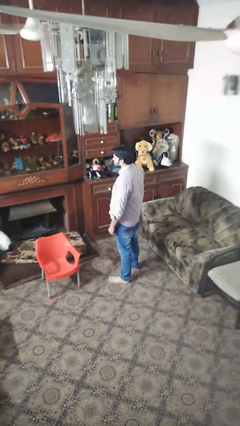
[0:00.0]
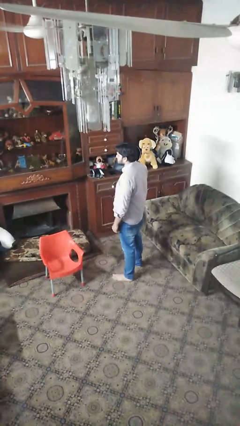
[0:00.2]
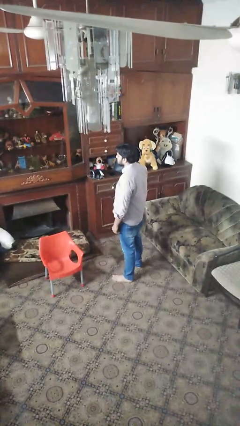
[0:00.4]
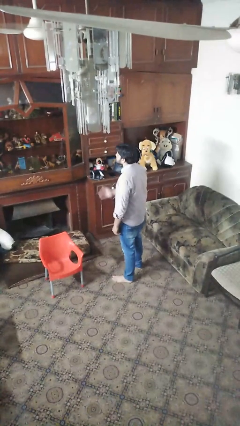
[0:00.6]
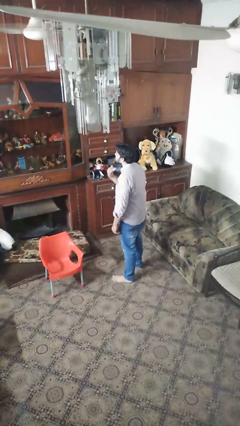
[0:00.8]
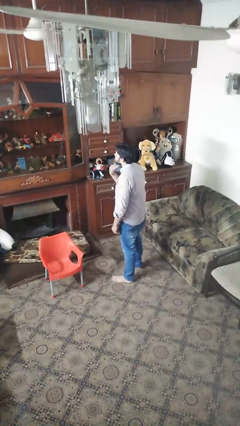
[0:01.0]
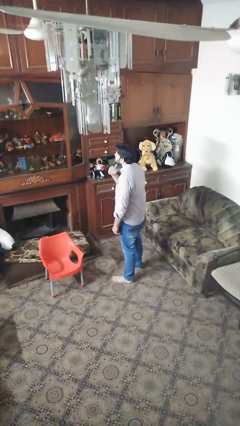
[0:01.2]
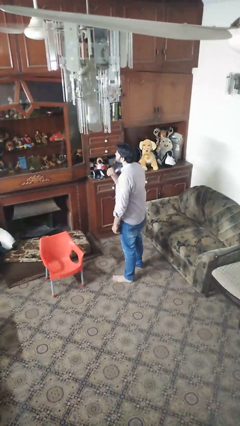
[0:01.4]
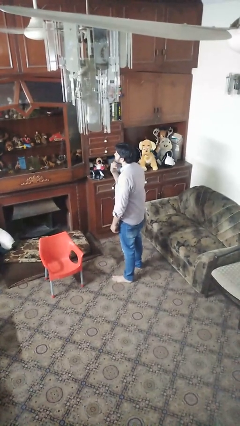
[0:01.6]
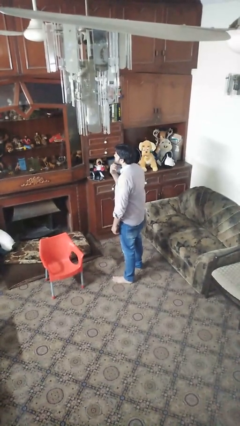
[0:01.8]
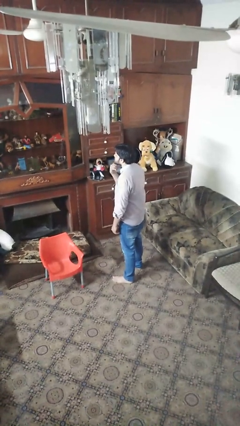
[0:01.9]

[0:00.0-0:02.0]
person gestures cut

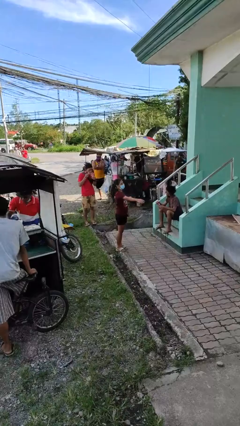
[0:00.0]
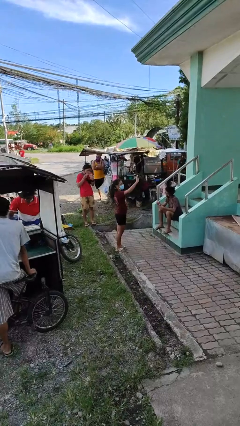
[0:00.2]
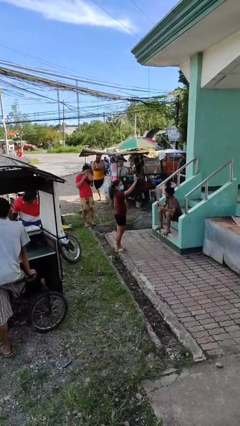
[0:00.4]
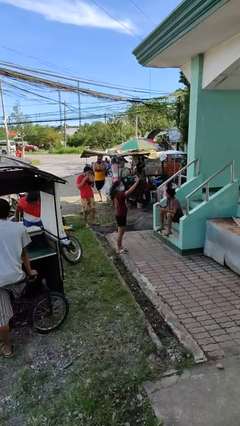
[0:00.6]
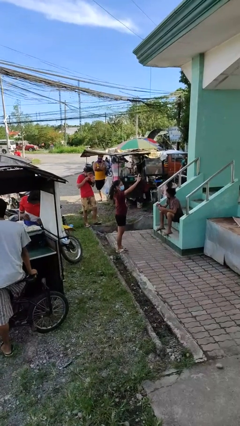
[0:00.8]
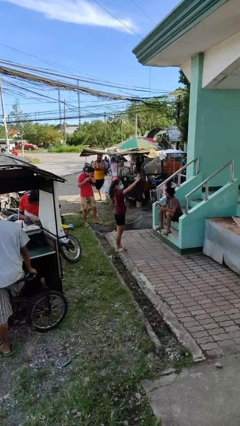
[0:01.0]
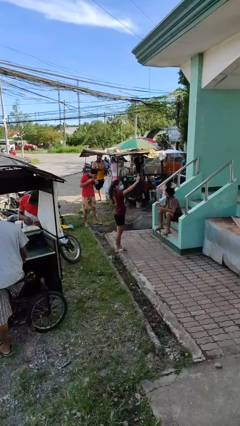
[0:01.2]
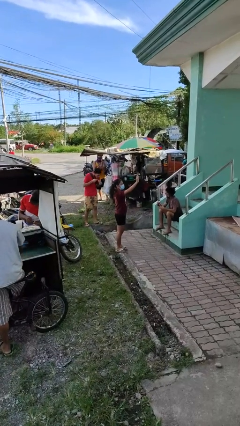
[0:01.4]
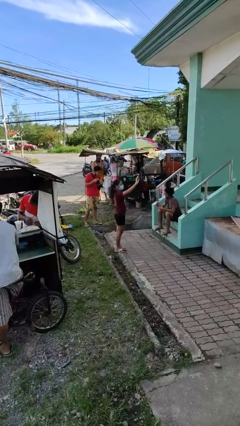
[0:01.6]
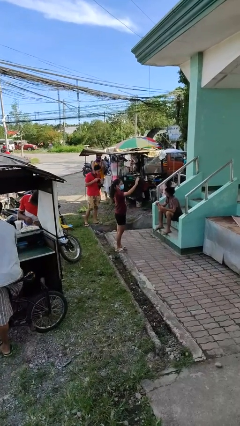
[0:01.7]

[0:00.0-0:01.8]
person waves at person

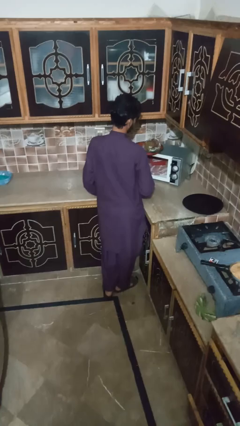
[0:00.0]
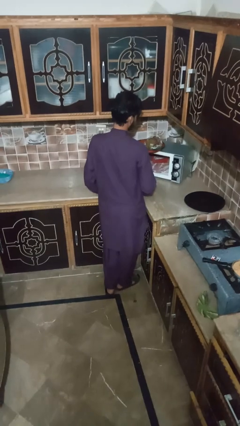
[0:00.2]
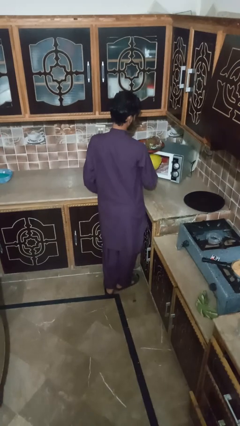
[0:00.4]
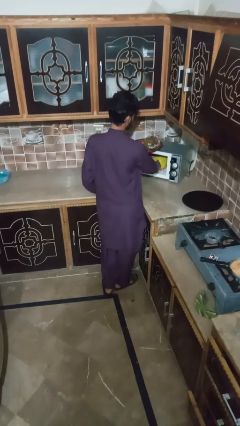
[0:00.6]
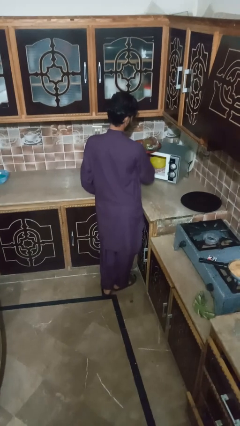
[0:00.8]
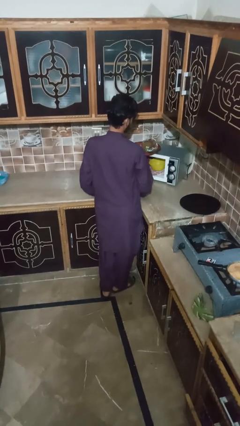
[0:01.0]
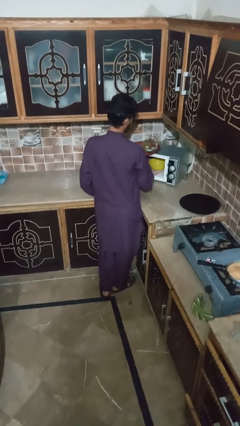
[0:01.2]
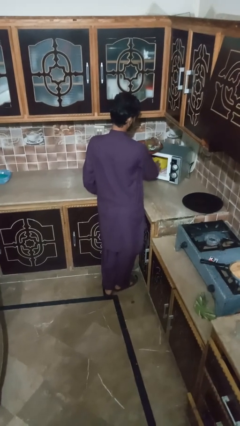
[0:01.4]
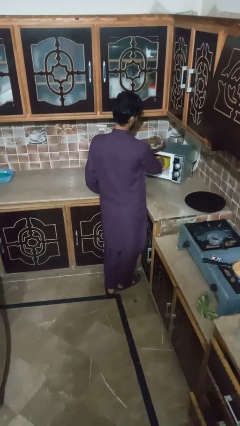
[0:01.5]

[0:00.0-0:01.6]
person puts object into microwave

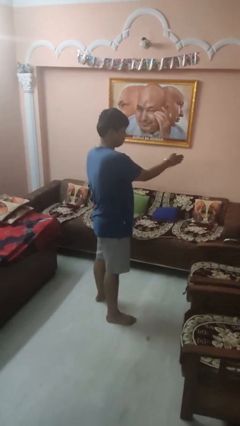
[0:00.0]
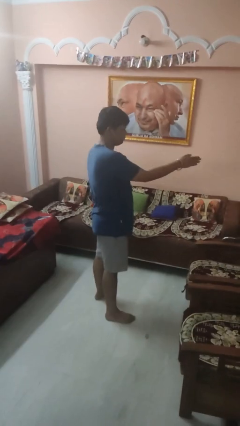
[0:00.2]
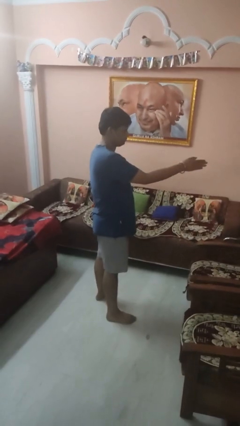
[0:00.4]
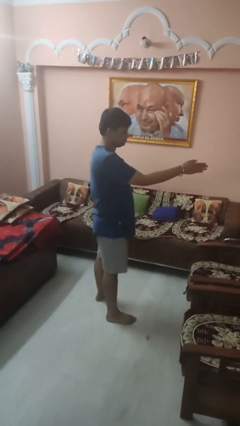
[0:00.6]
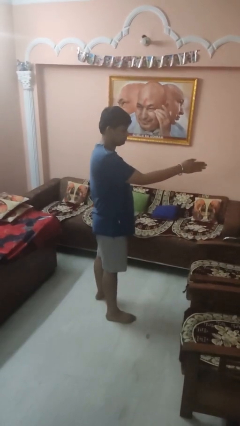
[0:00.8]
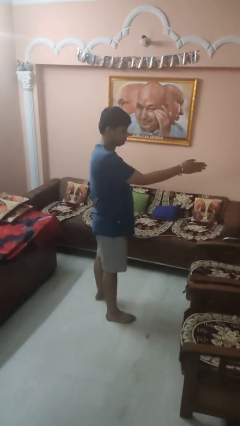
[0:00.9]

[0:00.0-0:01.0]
person gestures swipe right

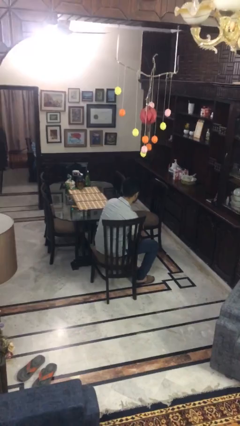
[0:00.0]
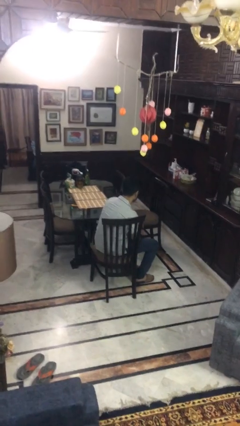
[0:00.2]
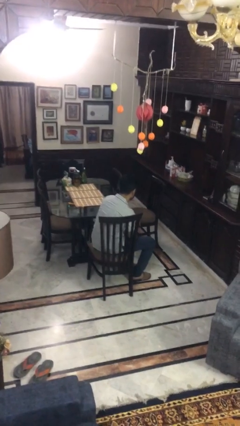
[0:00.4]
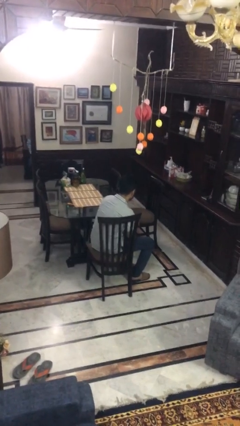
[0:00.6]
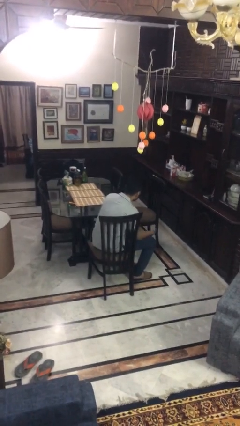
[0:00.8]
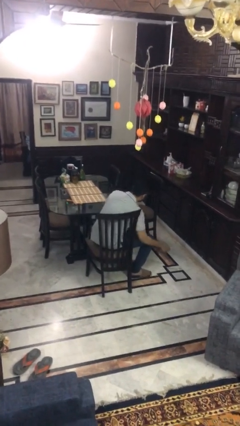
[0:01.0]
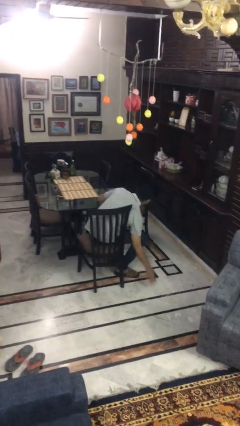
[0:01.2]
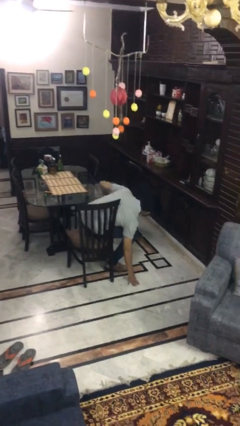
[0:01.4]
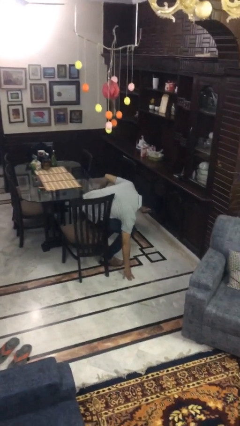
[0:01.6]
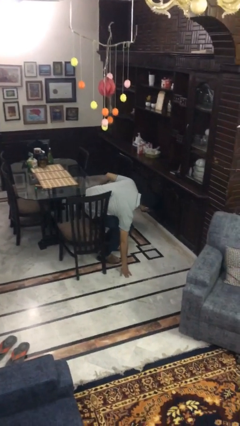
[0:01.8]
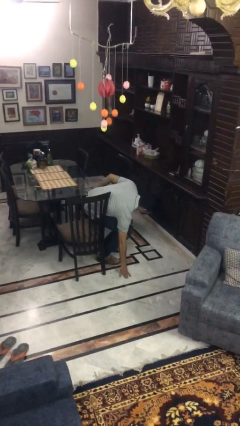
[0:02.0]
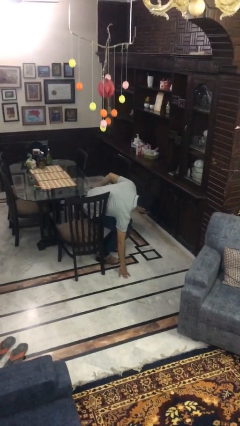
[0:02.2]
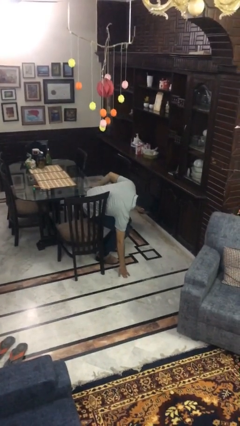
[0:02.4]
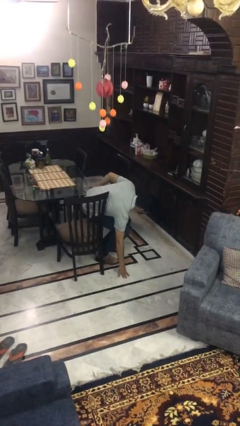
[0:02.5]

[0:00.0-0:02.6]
person falls from chair

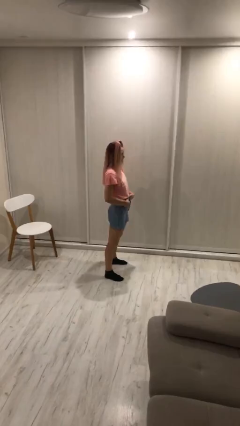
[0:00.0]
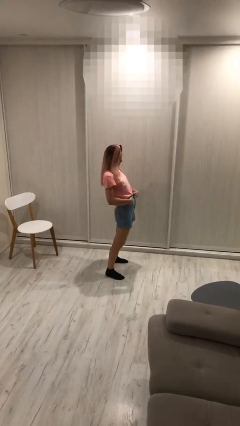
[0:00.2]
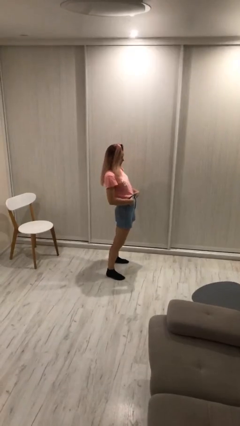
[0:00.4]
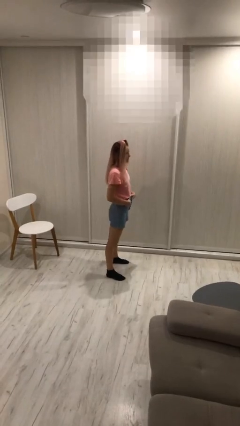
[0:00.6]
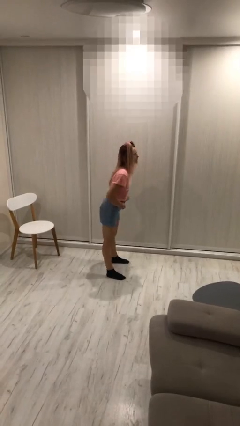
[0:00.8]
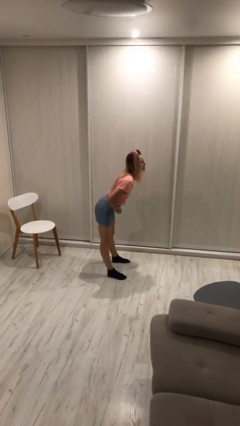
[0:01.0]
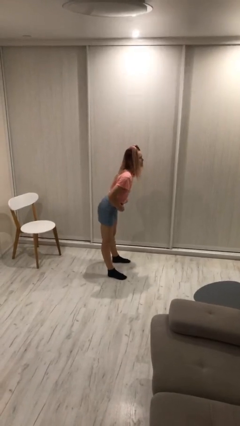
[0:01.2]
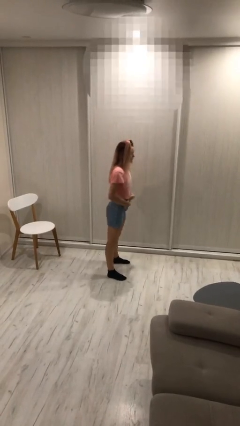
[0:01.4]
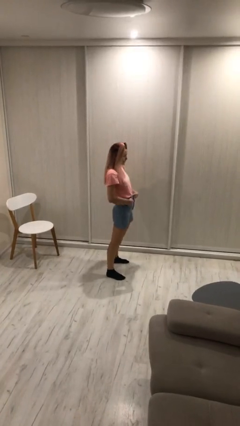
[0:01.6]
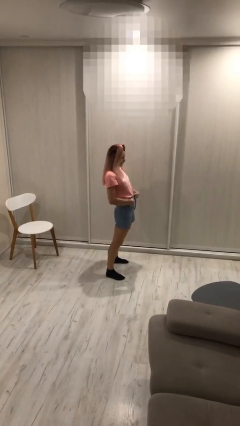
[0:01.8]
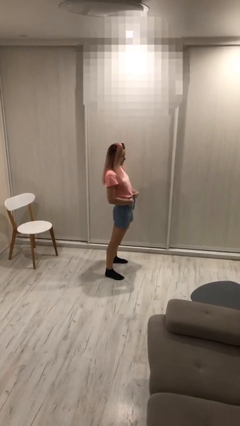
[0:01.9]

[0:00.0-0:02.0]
person wiggles hips

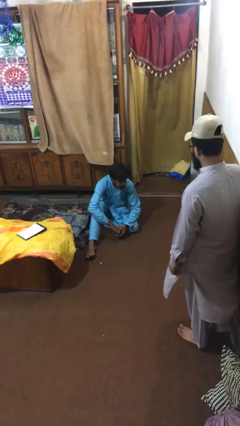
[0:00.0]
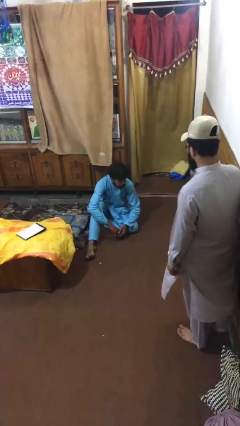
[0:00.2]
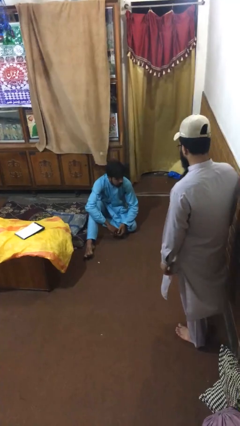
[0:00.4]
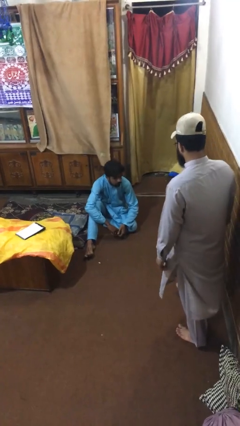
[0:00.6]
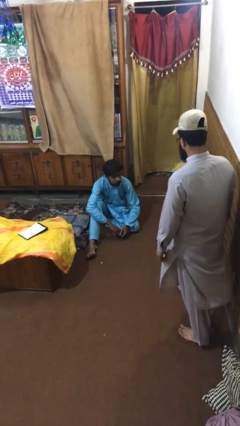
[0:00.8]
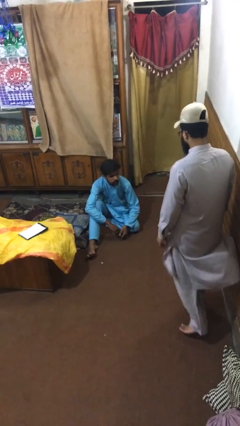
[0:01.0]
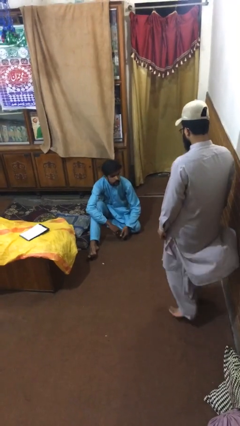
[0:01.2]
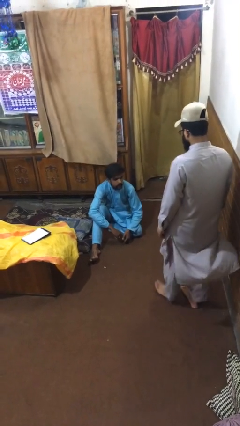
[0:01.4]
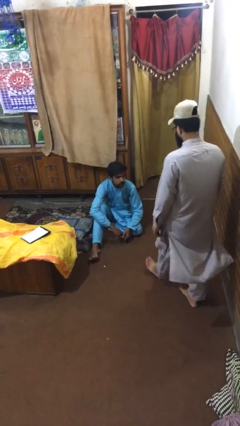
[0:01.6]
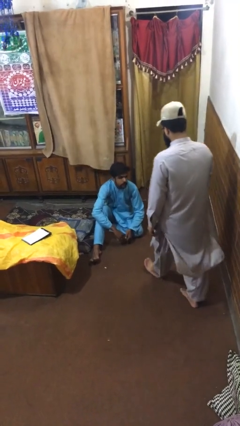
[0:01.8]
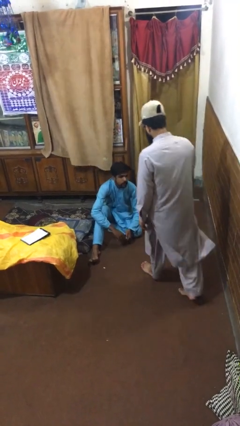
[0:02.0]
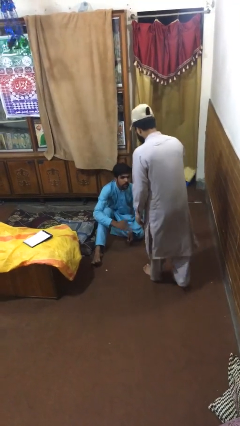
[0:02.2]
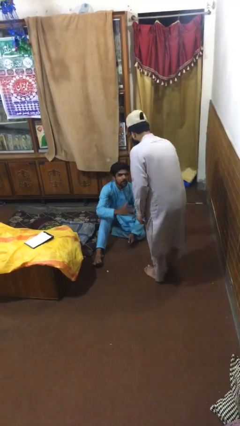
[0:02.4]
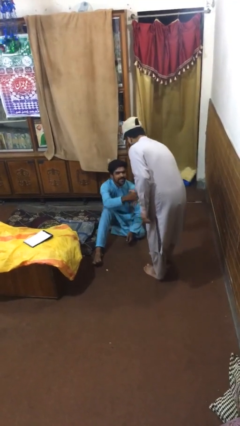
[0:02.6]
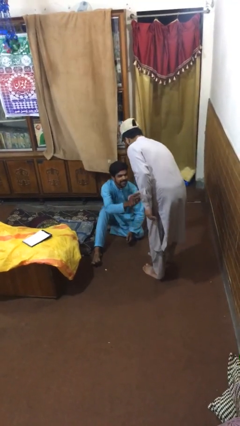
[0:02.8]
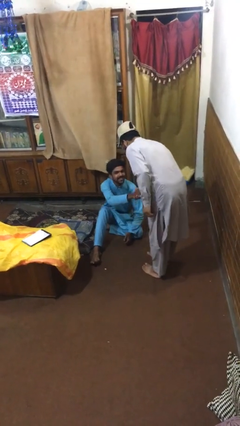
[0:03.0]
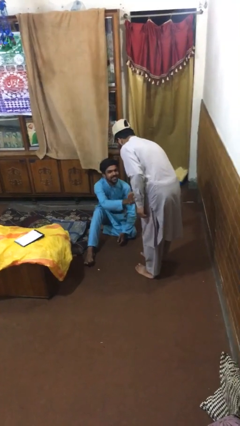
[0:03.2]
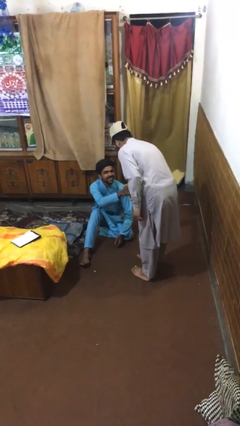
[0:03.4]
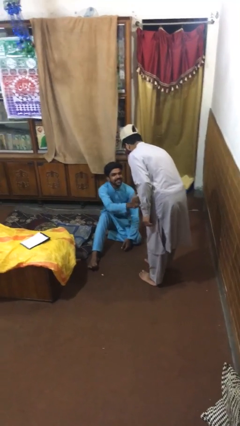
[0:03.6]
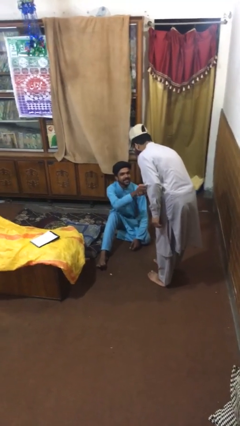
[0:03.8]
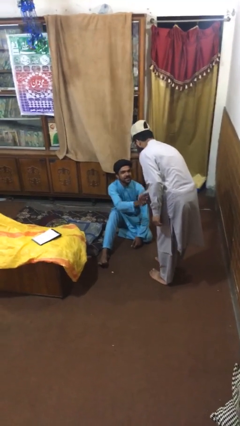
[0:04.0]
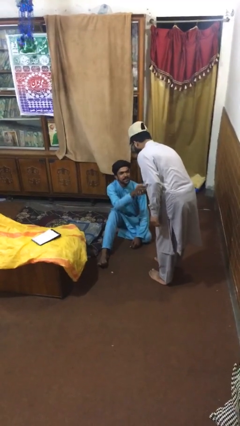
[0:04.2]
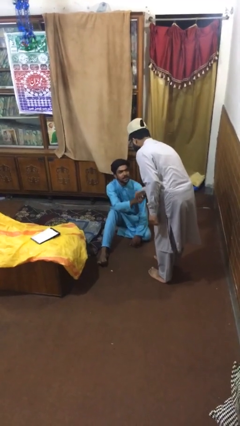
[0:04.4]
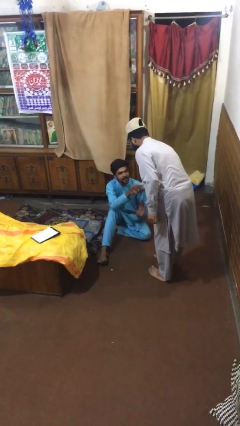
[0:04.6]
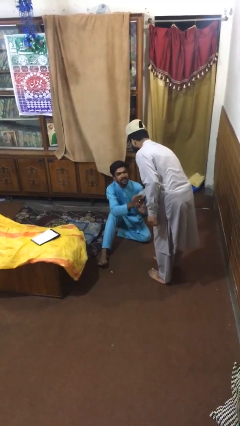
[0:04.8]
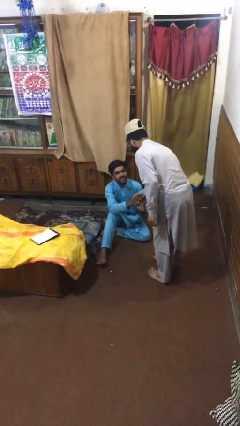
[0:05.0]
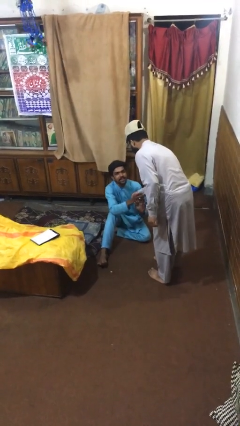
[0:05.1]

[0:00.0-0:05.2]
person shakes hand

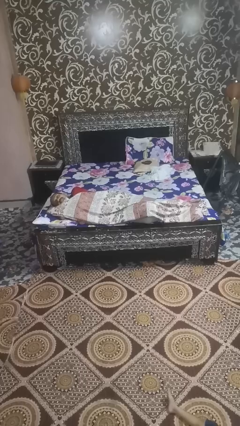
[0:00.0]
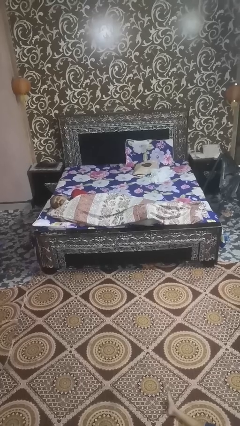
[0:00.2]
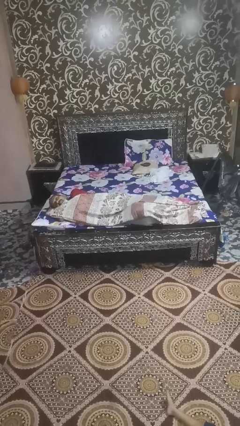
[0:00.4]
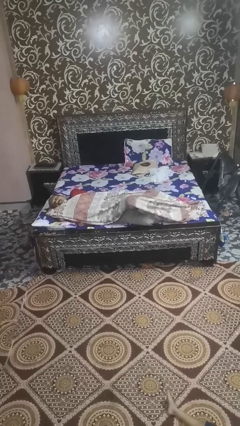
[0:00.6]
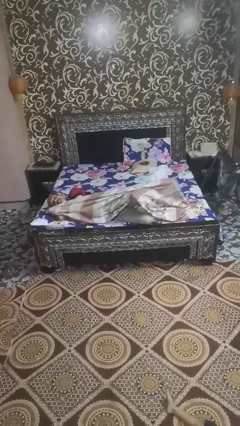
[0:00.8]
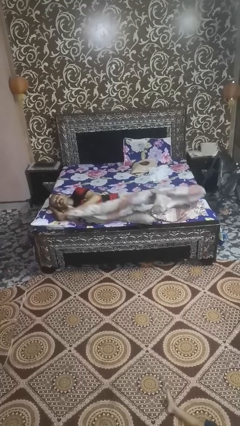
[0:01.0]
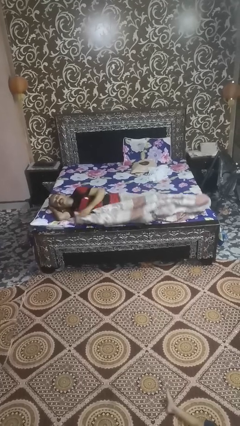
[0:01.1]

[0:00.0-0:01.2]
person uncovers with bedsheets
